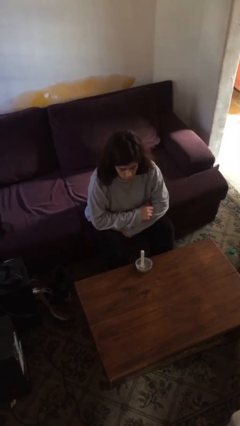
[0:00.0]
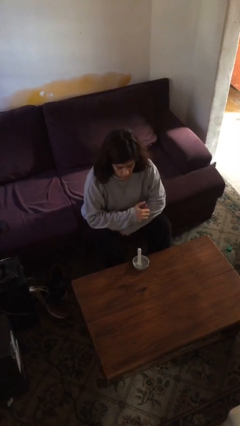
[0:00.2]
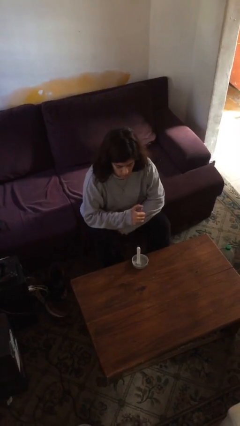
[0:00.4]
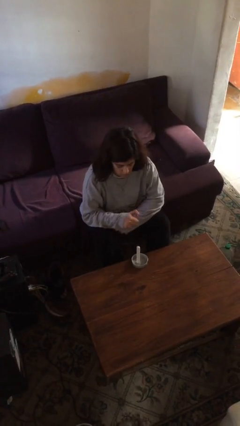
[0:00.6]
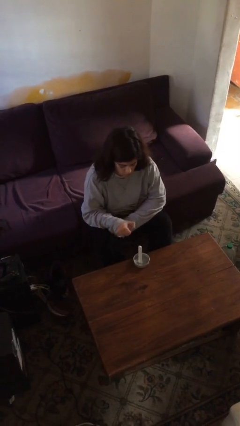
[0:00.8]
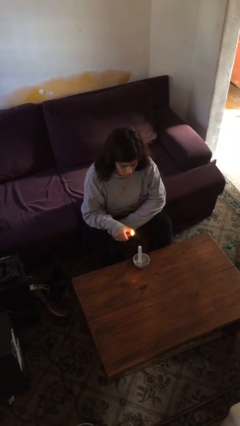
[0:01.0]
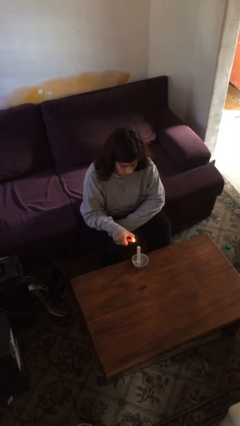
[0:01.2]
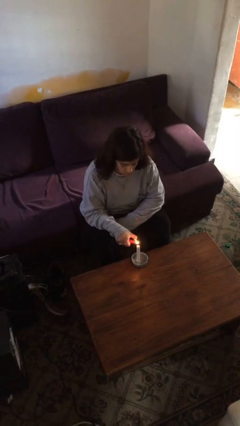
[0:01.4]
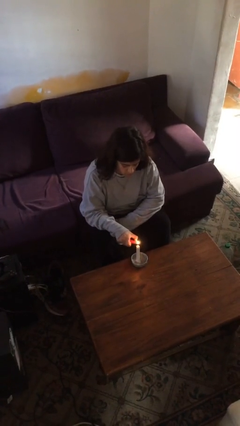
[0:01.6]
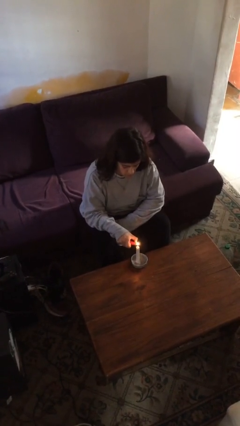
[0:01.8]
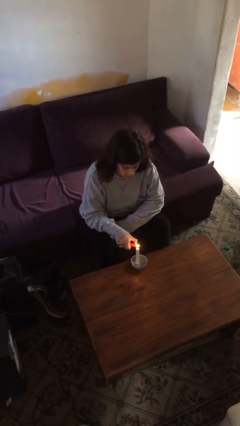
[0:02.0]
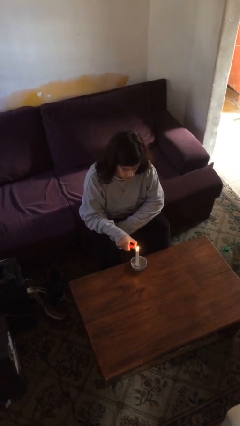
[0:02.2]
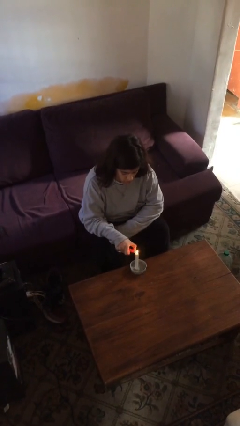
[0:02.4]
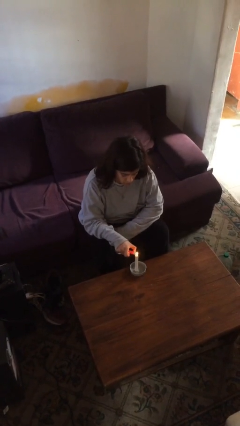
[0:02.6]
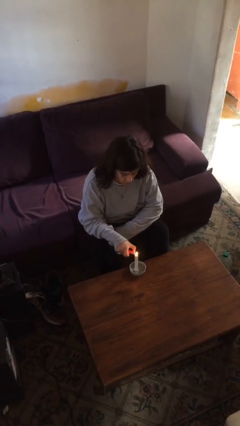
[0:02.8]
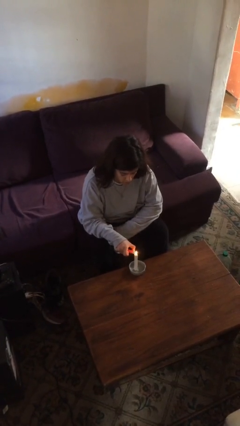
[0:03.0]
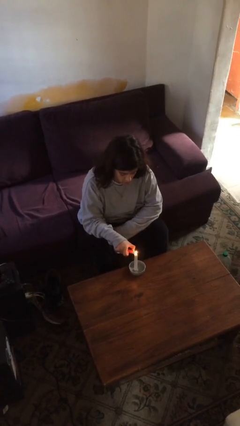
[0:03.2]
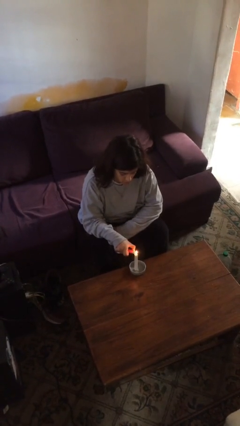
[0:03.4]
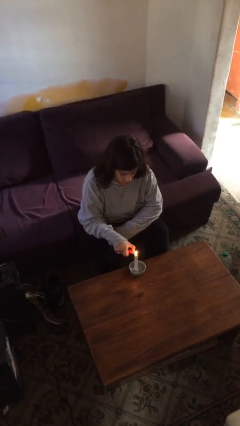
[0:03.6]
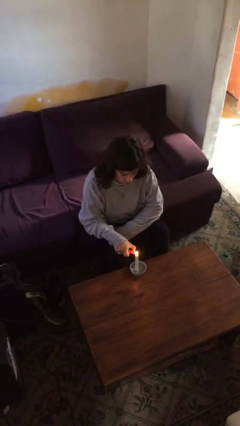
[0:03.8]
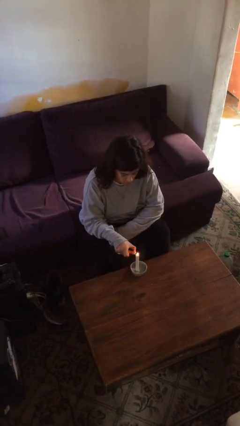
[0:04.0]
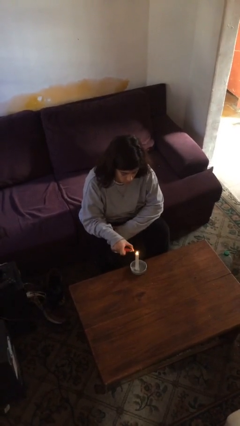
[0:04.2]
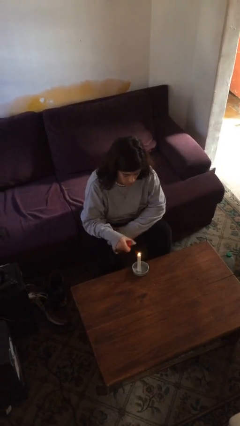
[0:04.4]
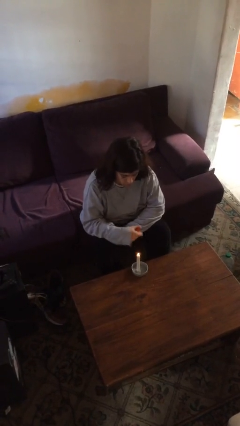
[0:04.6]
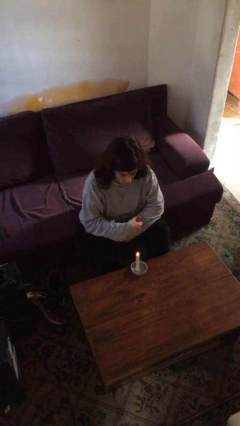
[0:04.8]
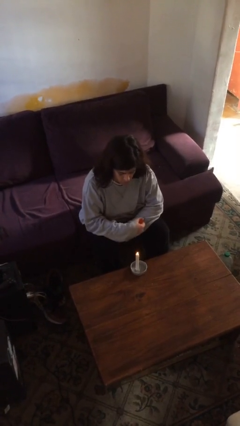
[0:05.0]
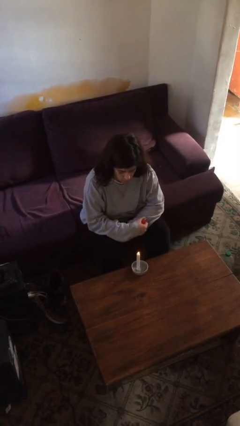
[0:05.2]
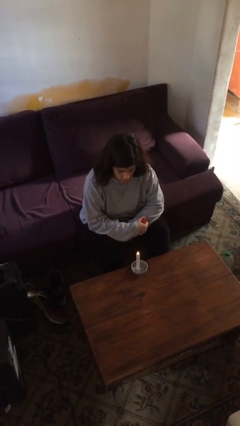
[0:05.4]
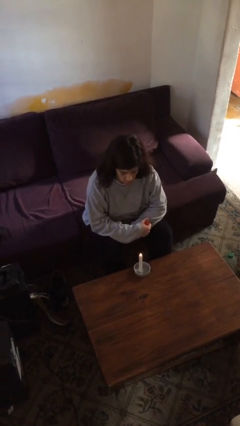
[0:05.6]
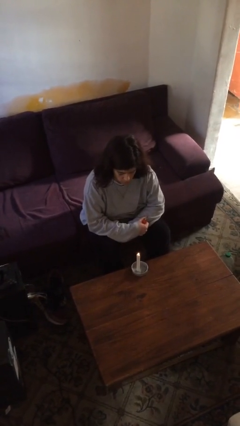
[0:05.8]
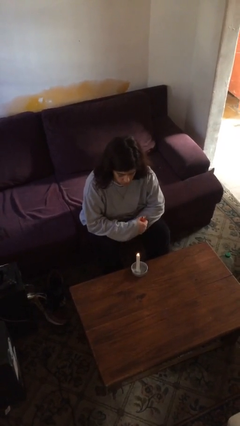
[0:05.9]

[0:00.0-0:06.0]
person lights candle

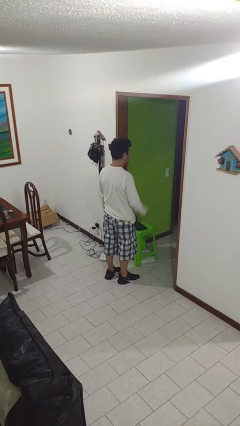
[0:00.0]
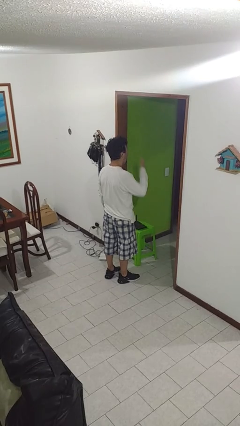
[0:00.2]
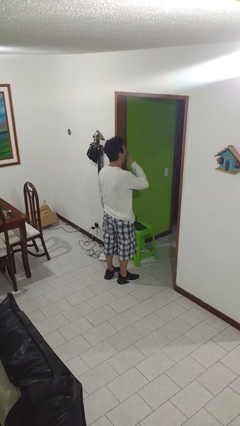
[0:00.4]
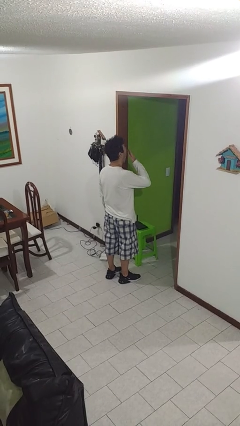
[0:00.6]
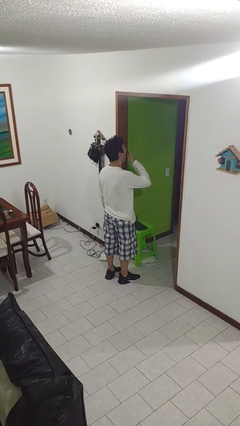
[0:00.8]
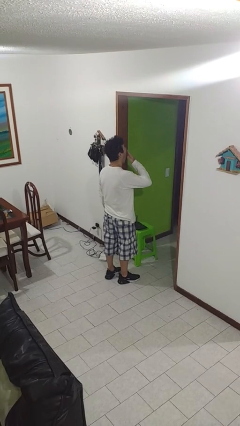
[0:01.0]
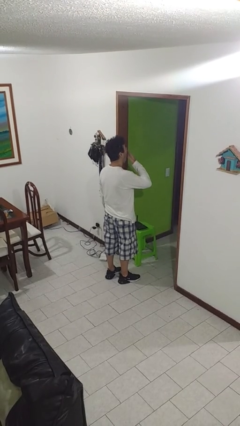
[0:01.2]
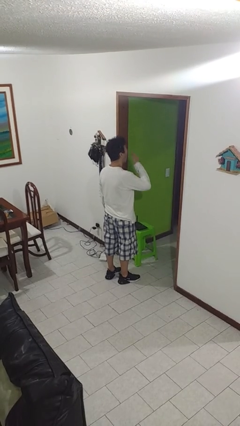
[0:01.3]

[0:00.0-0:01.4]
person yawns

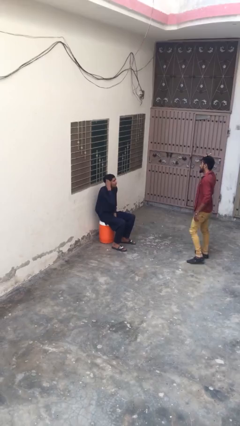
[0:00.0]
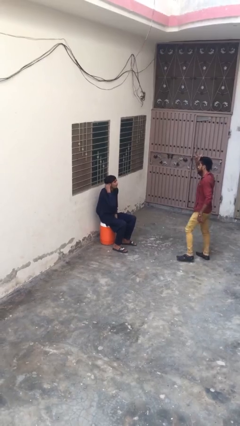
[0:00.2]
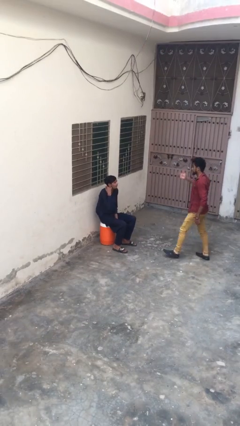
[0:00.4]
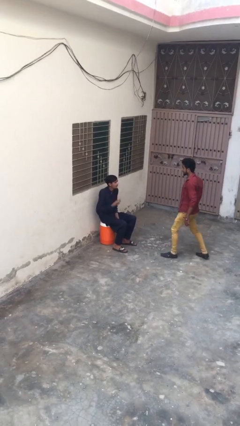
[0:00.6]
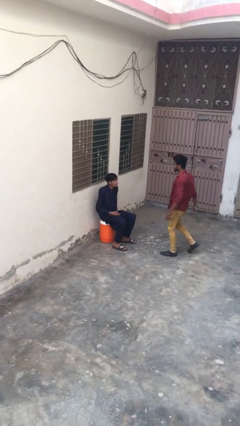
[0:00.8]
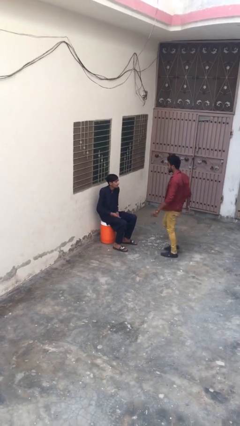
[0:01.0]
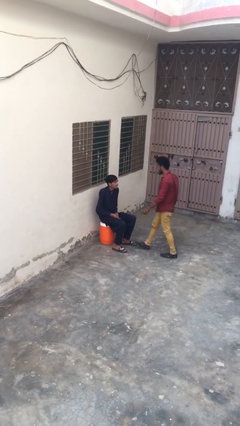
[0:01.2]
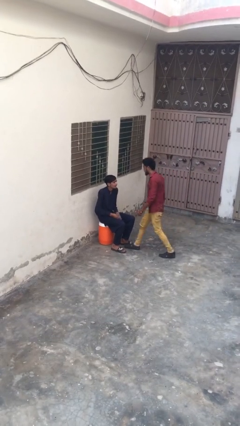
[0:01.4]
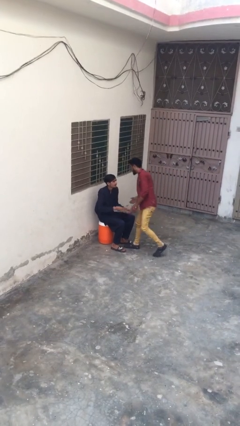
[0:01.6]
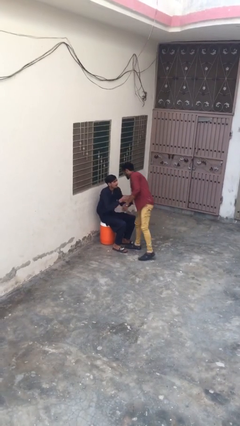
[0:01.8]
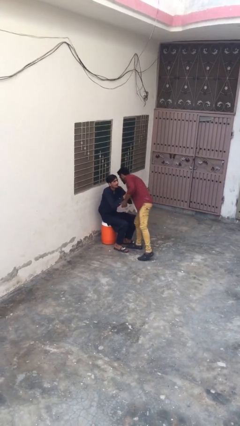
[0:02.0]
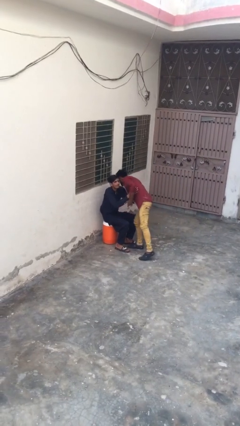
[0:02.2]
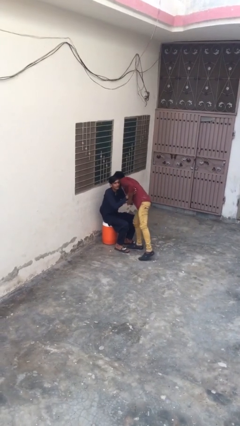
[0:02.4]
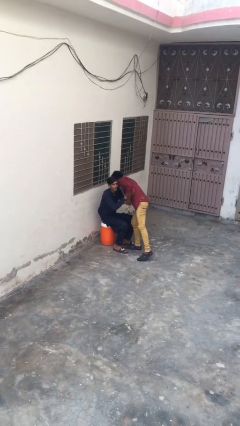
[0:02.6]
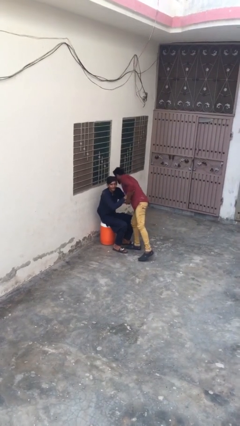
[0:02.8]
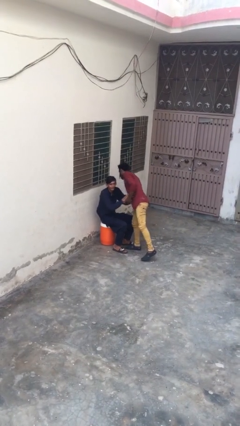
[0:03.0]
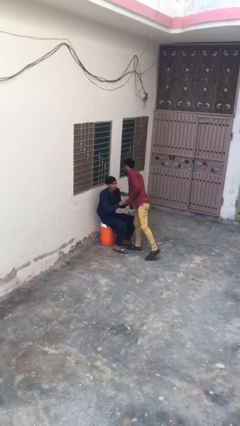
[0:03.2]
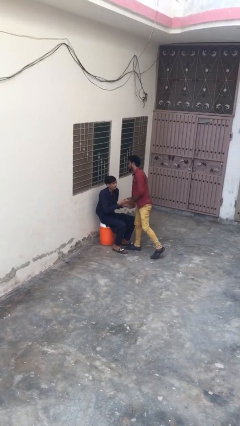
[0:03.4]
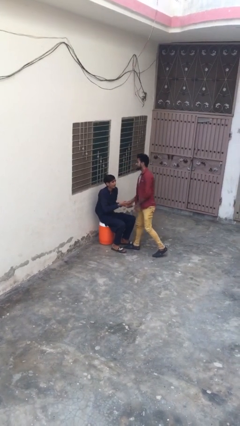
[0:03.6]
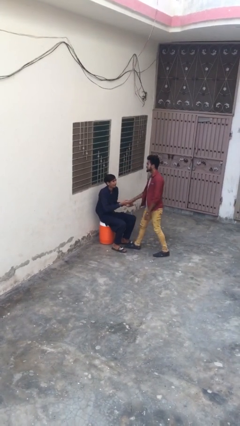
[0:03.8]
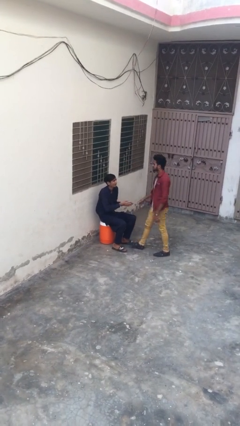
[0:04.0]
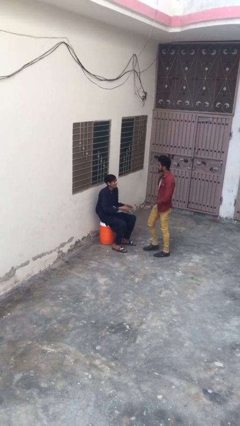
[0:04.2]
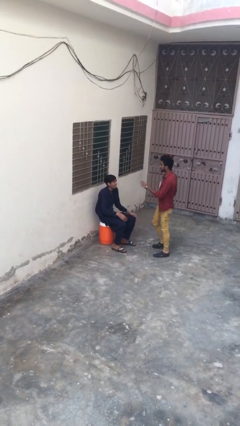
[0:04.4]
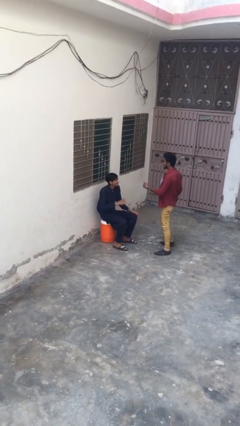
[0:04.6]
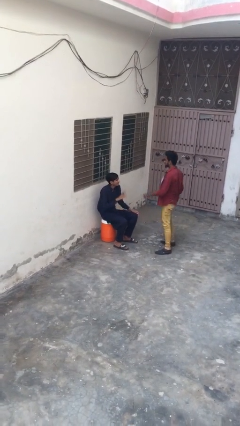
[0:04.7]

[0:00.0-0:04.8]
person embraces person

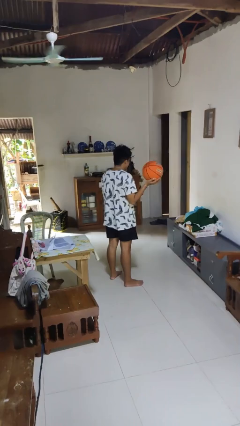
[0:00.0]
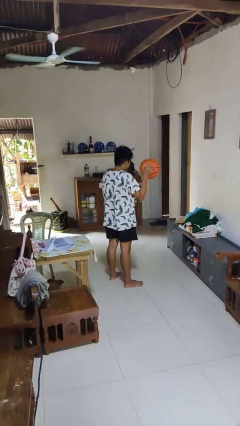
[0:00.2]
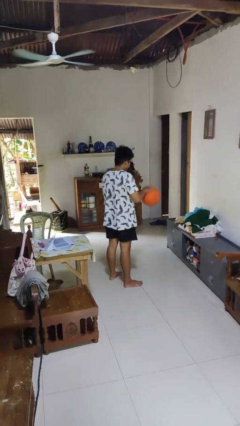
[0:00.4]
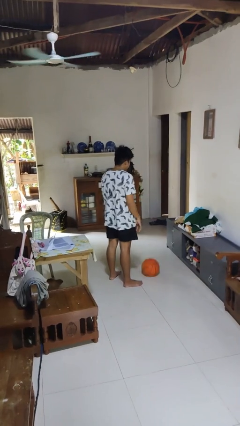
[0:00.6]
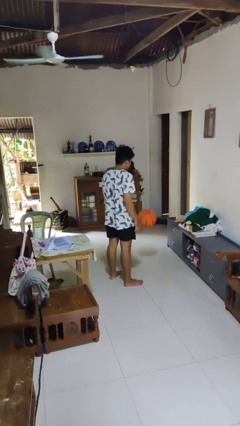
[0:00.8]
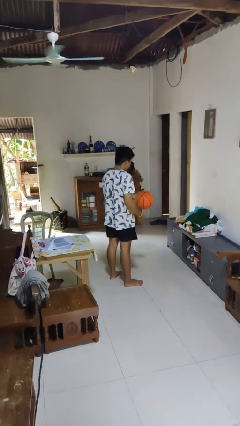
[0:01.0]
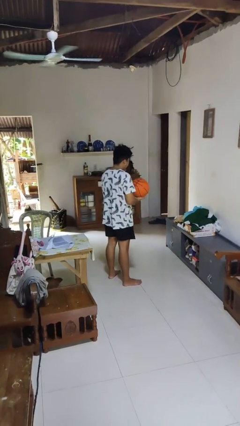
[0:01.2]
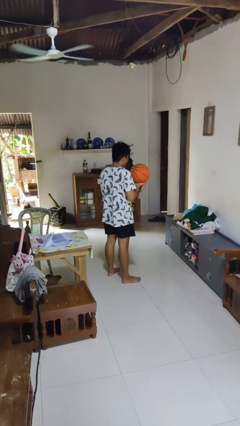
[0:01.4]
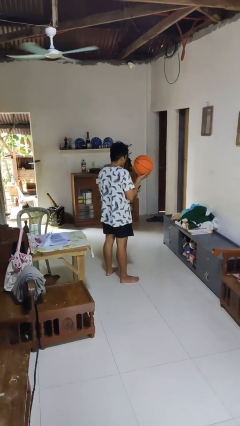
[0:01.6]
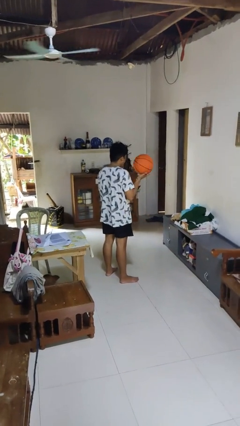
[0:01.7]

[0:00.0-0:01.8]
person bounces ball on floor

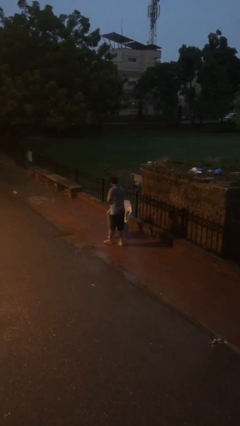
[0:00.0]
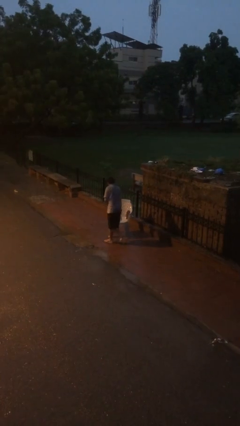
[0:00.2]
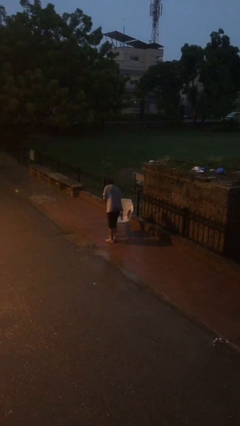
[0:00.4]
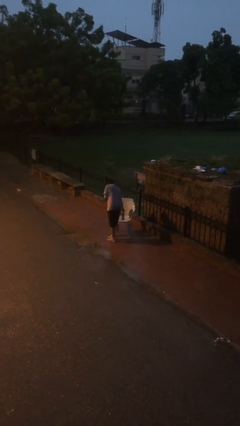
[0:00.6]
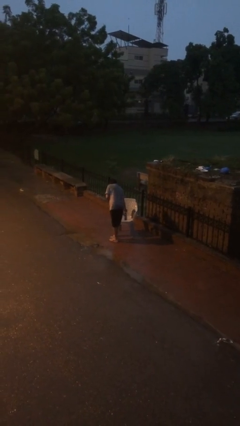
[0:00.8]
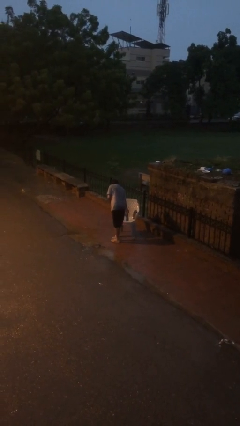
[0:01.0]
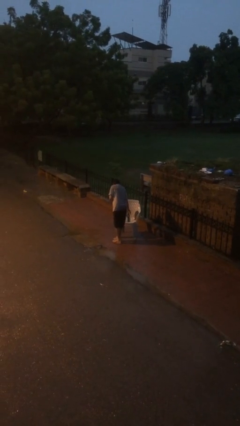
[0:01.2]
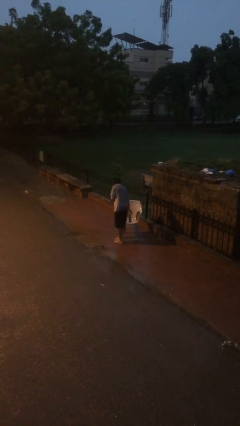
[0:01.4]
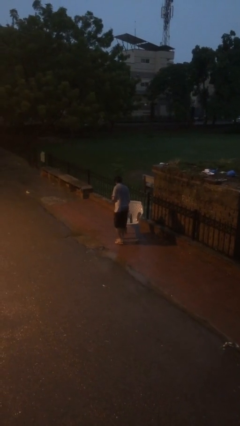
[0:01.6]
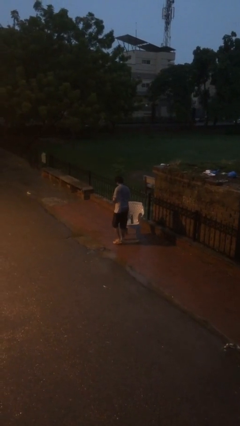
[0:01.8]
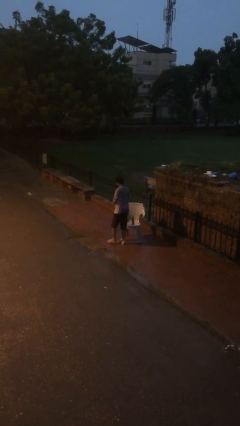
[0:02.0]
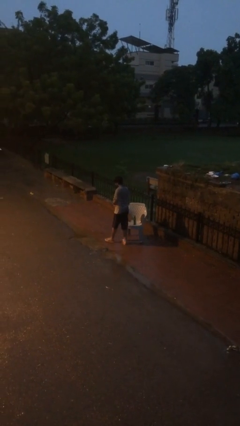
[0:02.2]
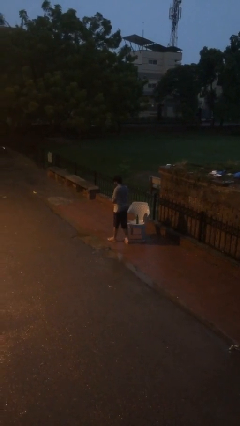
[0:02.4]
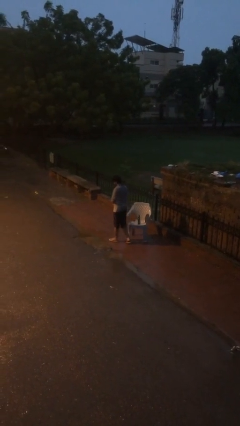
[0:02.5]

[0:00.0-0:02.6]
person puts down object on table

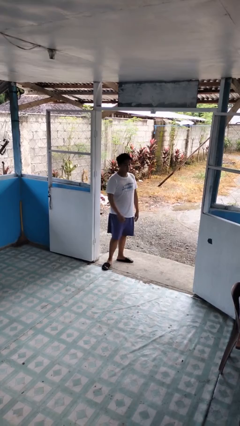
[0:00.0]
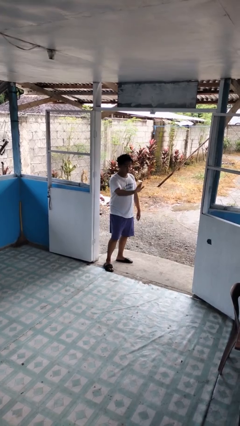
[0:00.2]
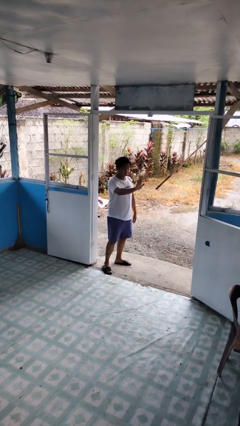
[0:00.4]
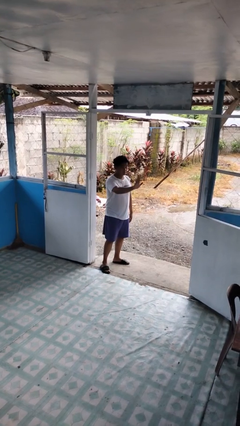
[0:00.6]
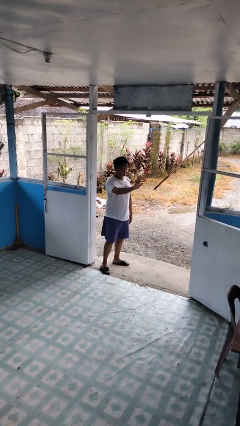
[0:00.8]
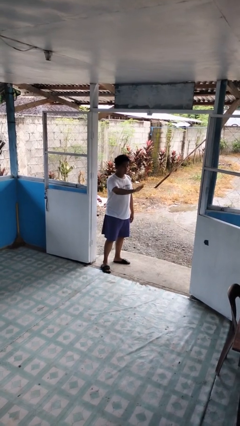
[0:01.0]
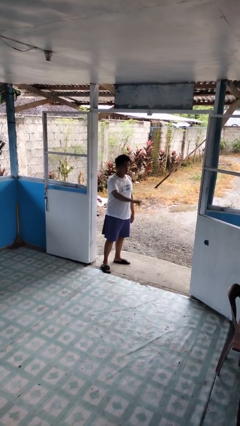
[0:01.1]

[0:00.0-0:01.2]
person gestures stop
